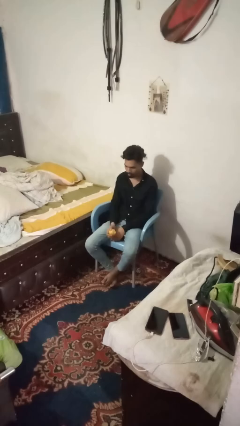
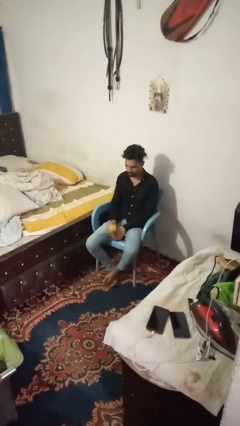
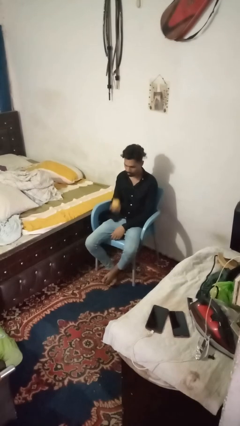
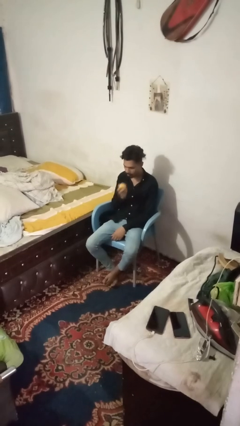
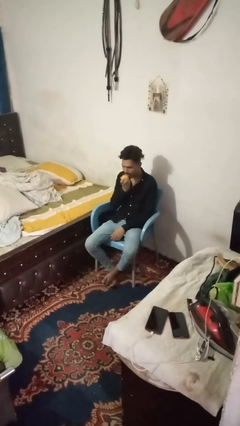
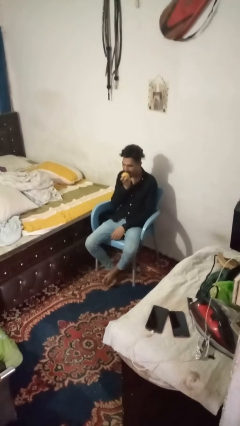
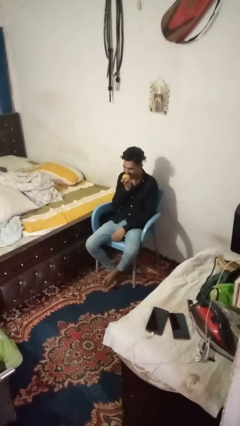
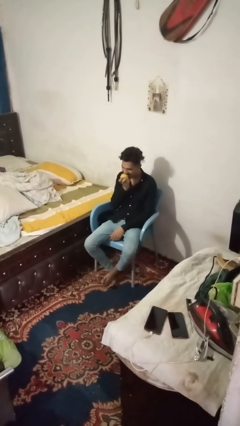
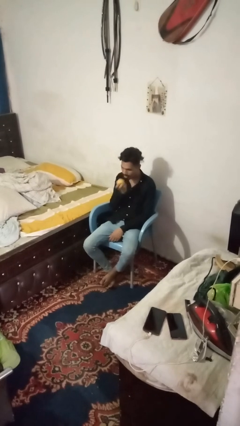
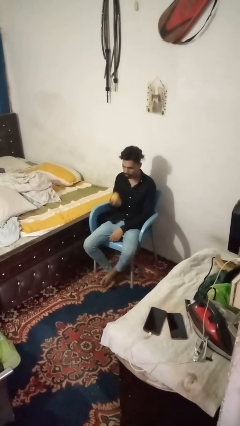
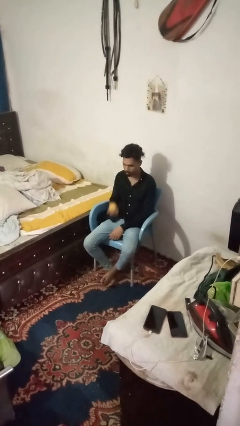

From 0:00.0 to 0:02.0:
person eats apple

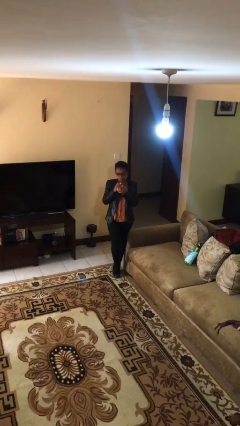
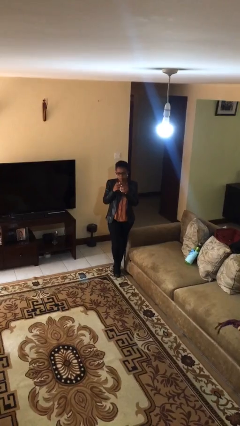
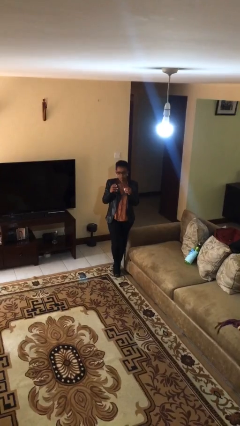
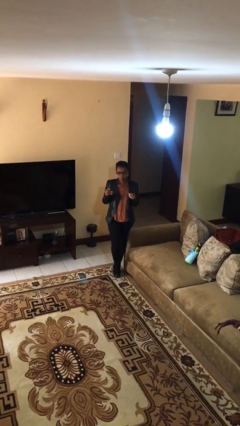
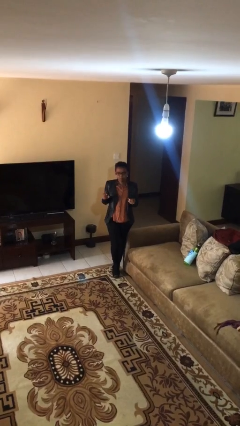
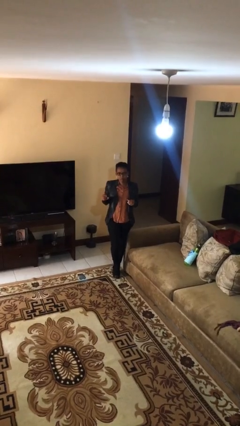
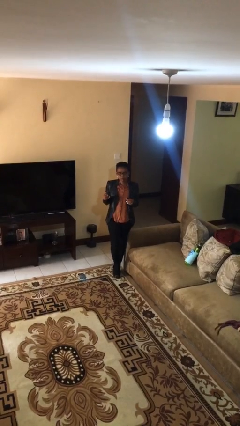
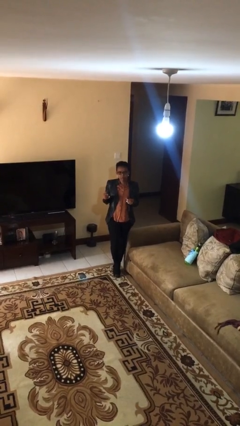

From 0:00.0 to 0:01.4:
person takes off ring

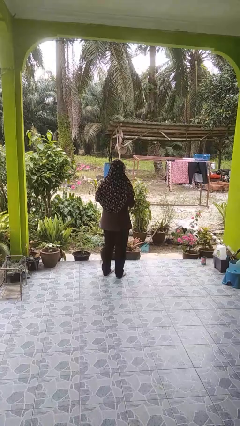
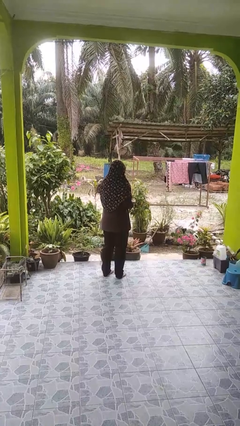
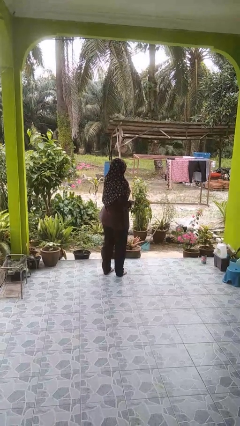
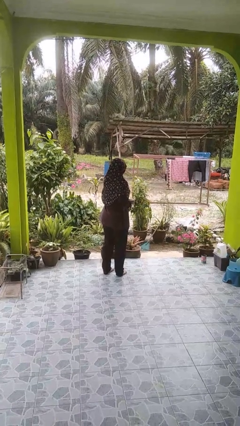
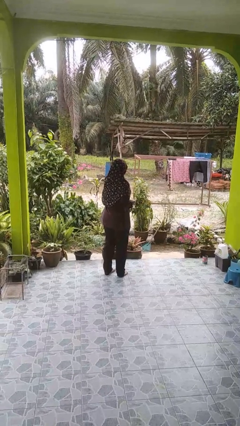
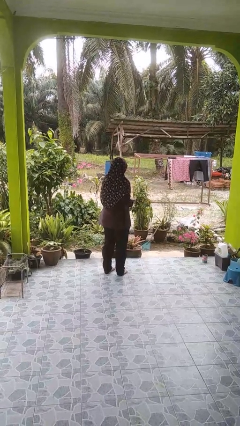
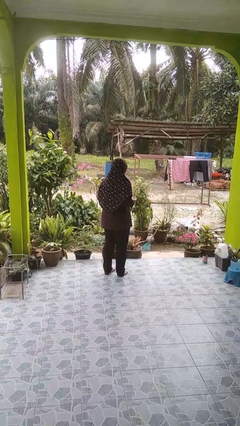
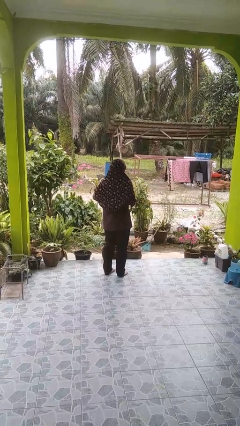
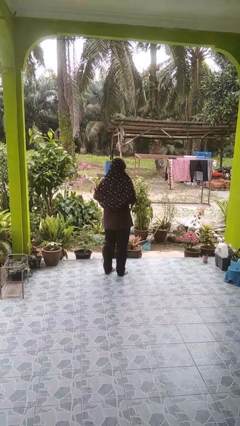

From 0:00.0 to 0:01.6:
person punches

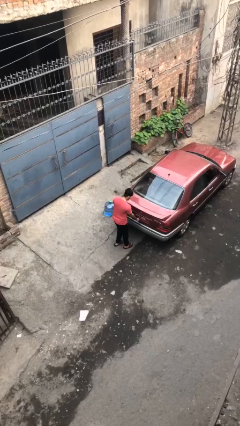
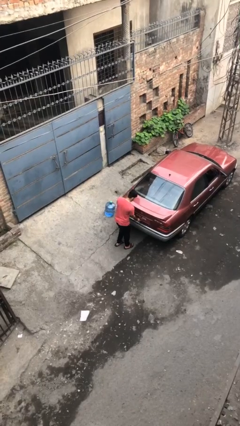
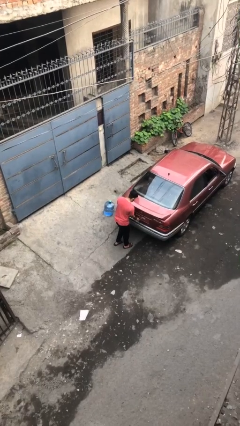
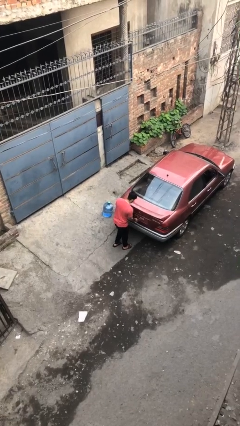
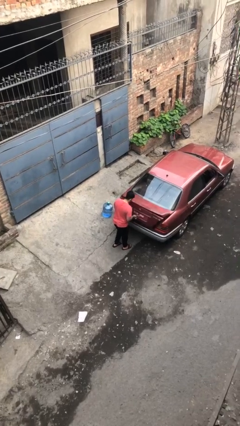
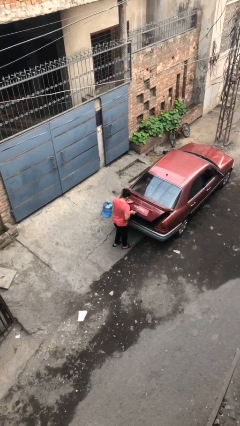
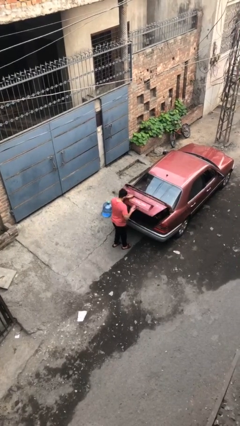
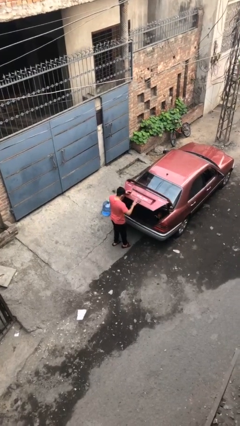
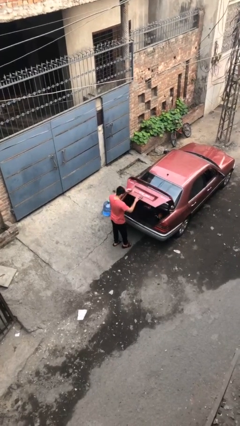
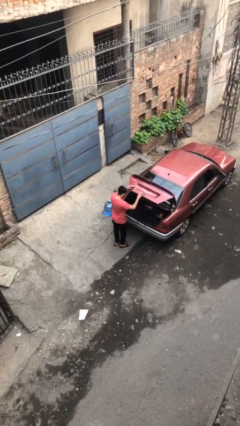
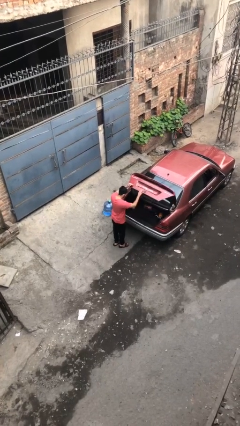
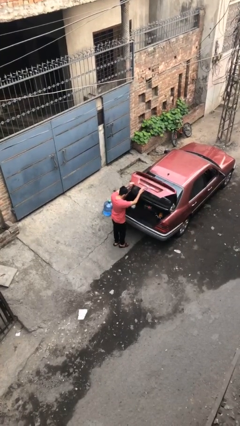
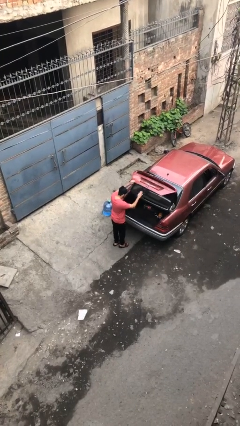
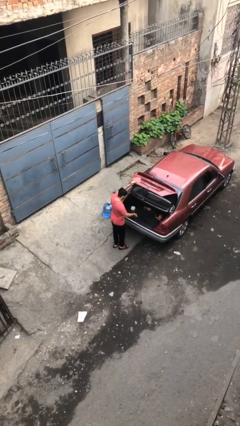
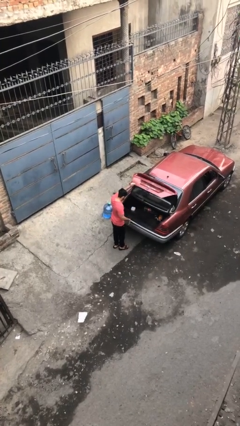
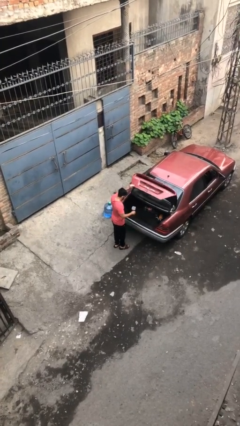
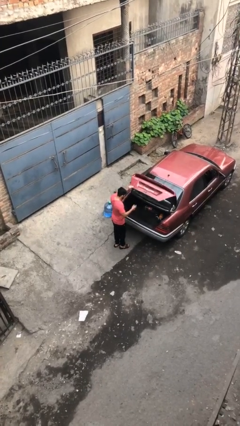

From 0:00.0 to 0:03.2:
person opens car trunk

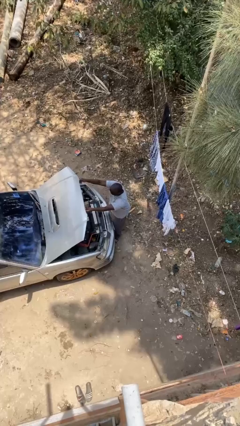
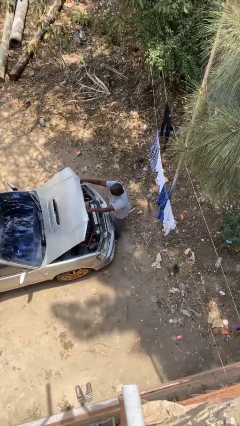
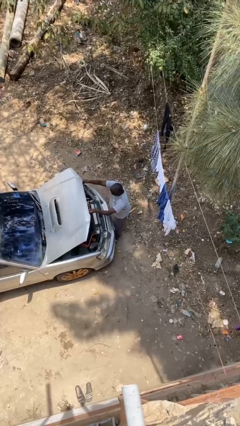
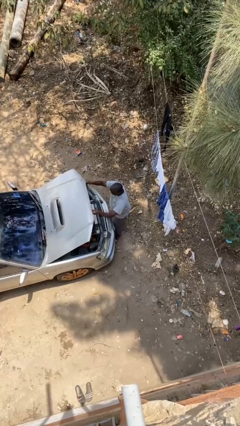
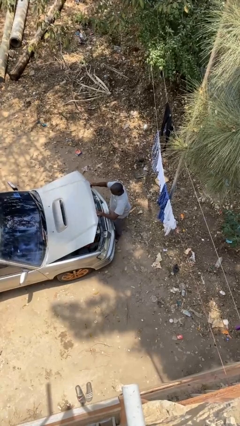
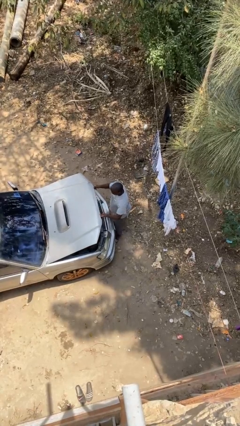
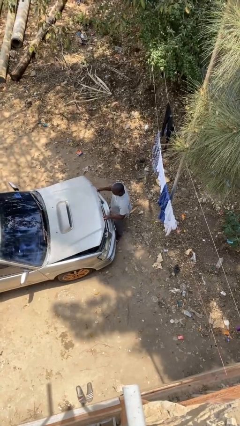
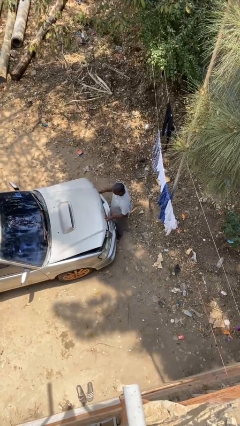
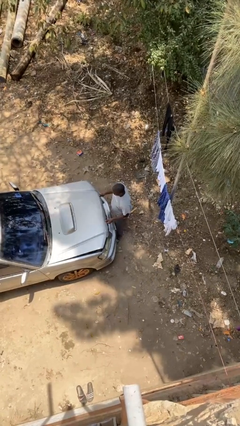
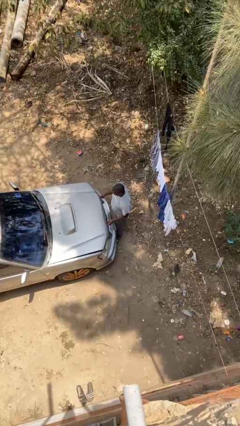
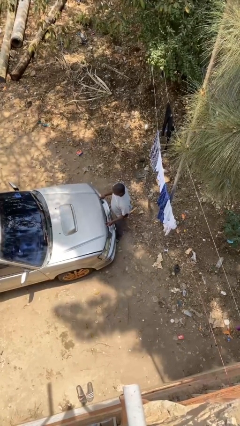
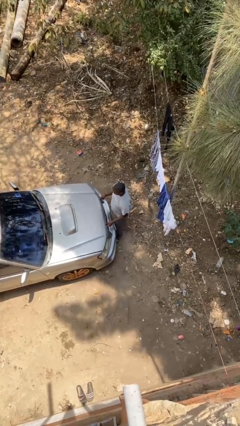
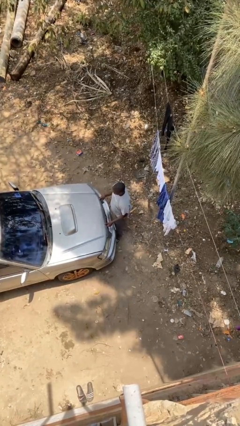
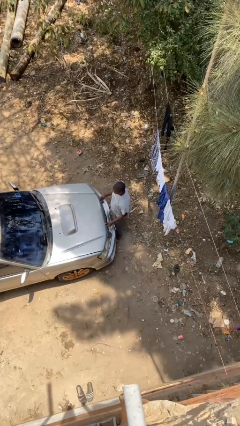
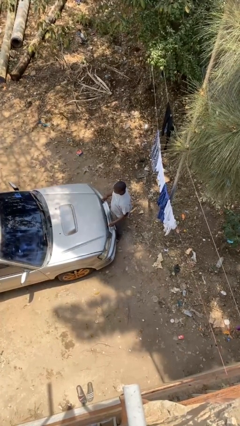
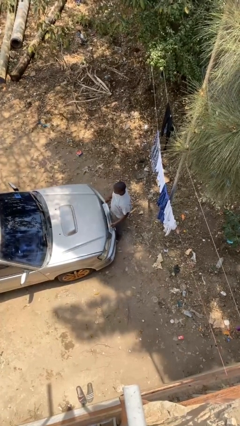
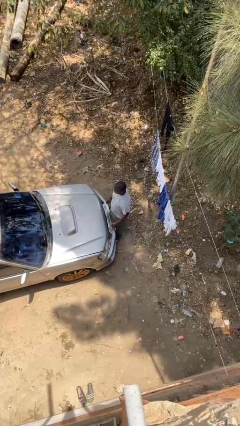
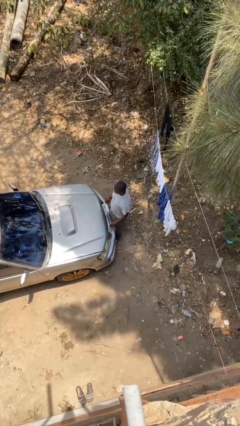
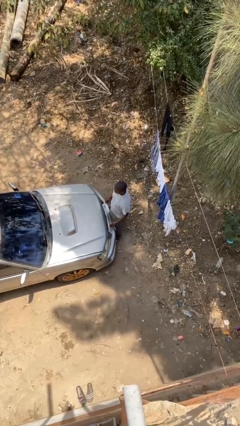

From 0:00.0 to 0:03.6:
person closes car hood

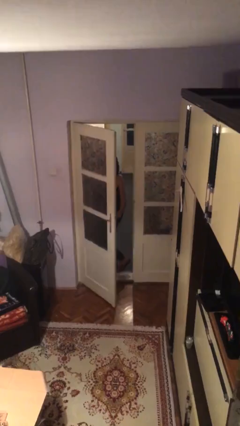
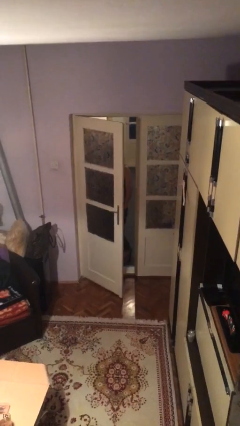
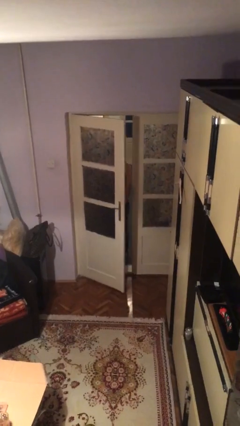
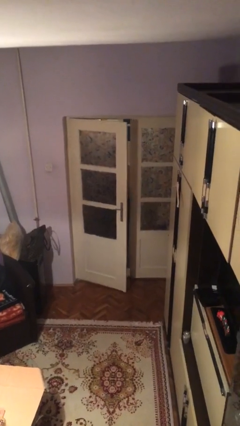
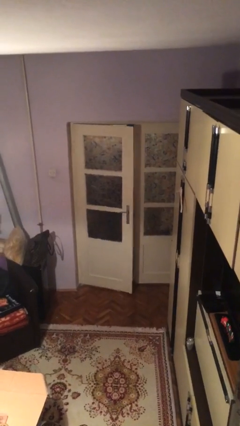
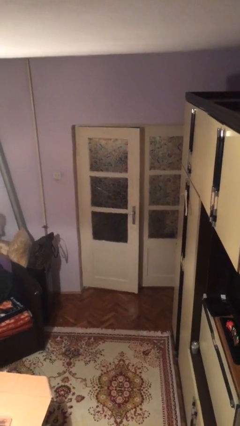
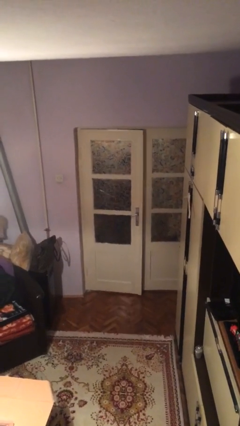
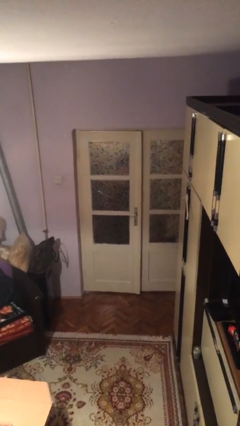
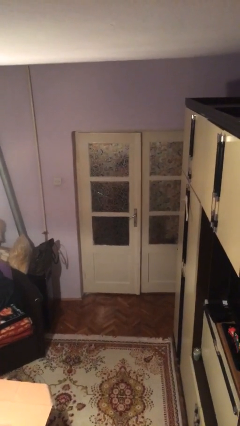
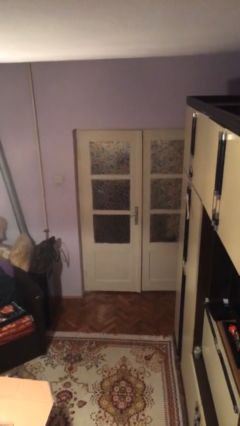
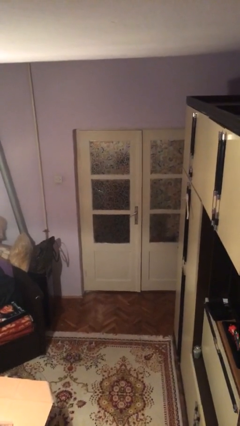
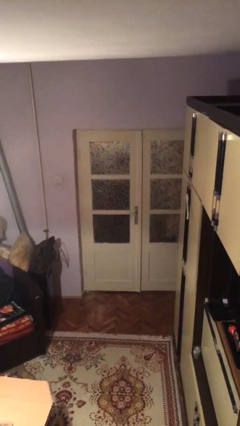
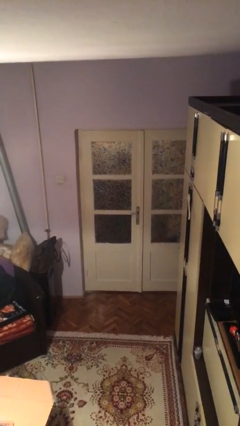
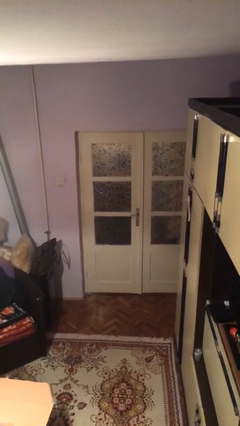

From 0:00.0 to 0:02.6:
person closes facility door

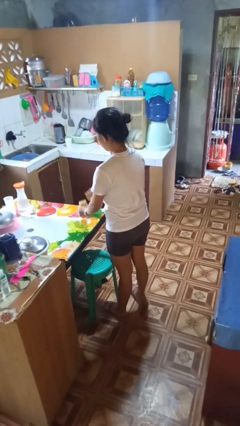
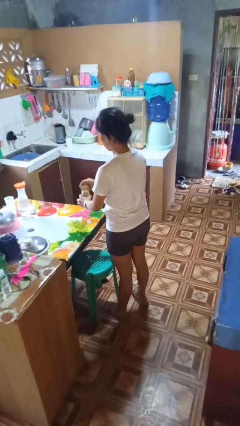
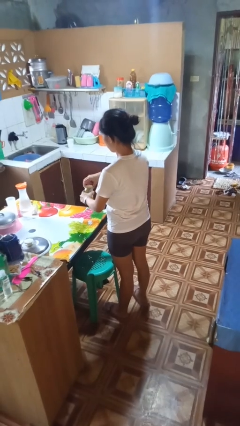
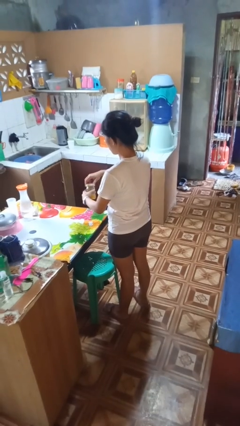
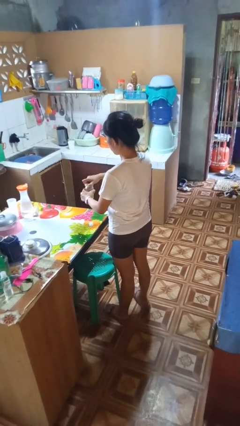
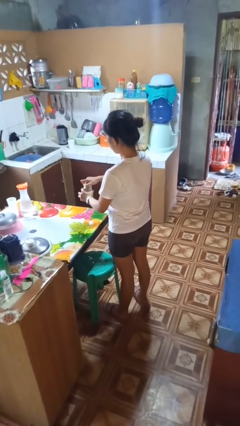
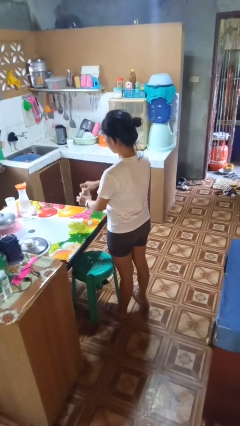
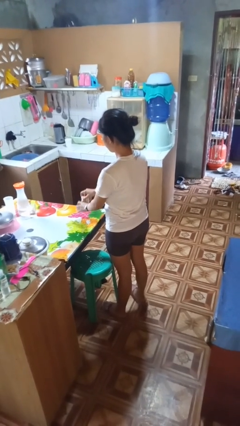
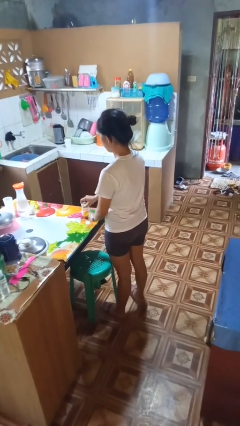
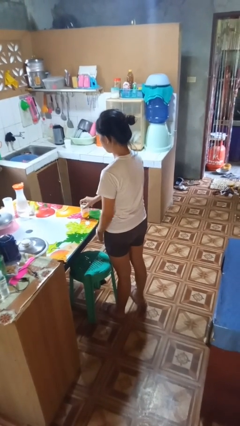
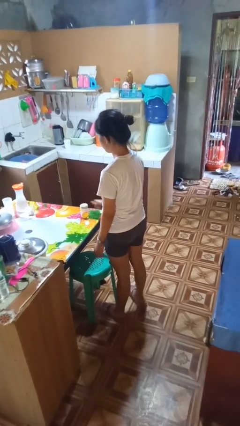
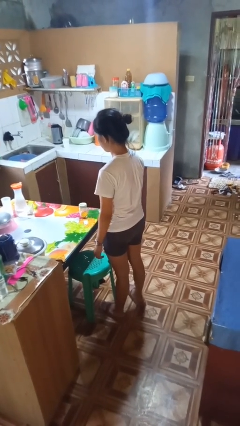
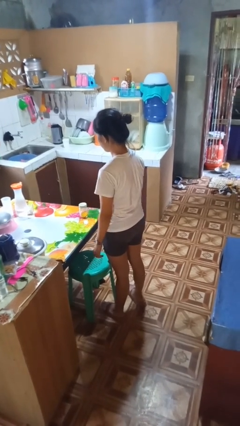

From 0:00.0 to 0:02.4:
person closes jar

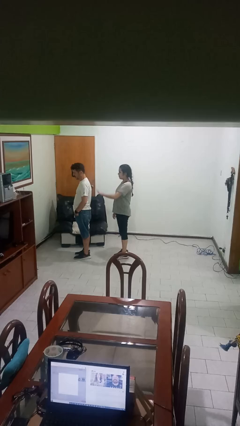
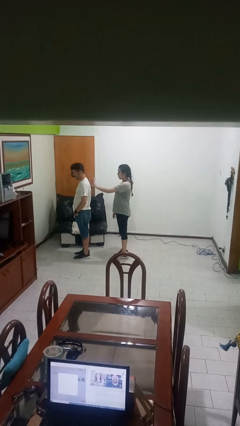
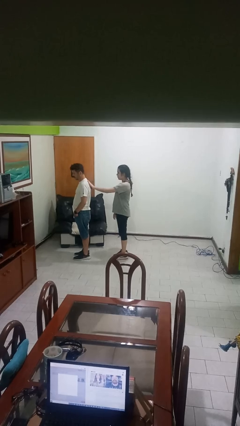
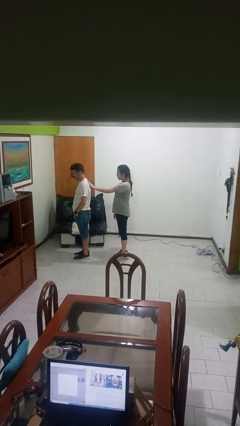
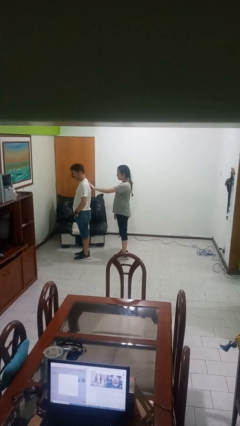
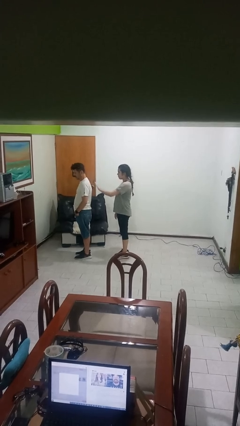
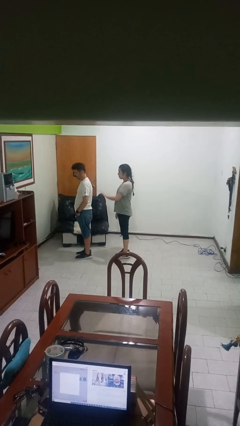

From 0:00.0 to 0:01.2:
person touches back of person
